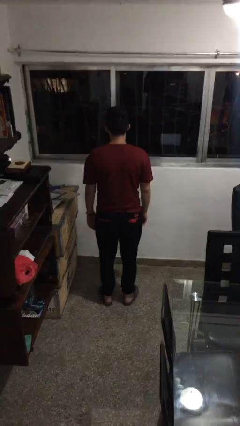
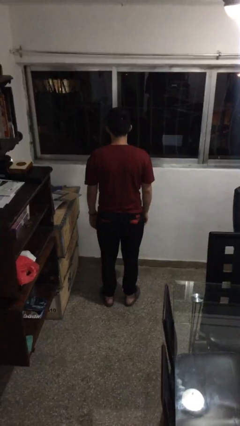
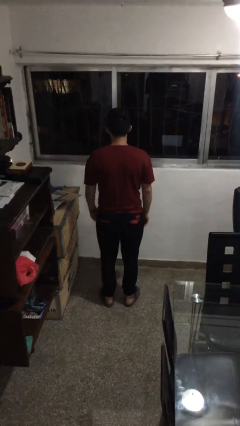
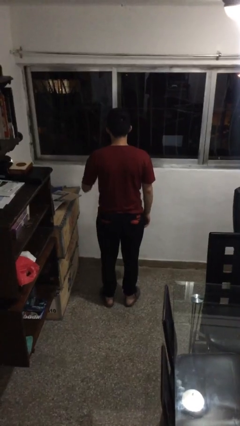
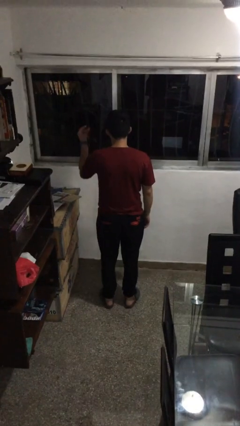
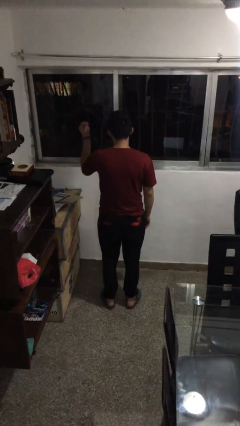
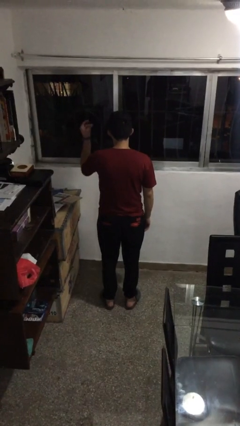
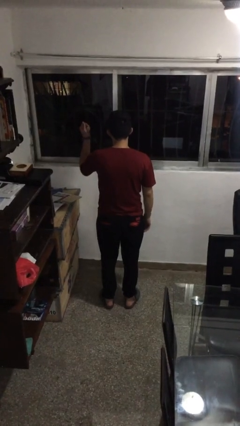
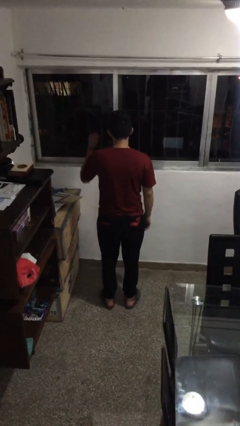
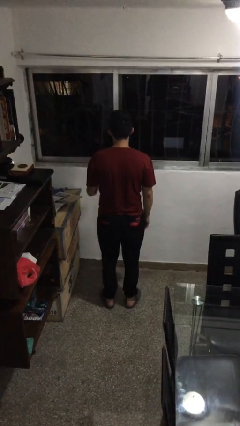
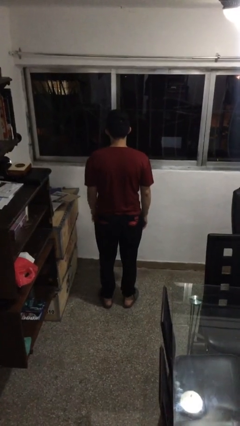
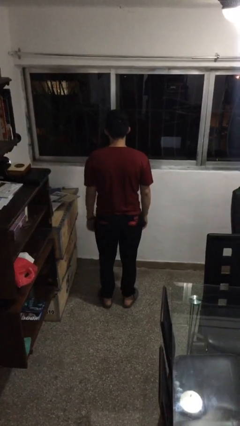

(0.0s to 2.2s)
person snaps fingers

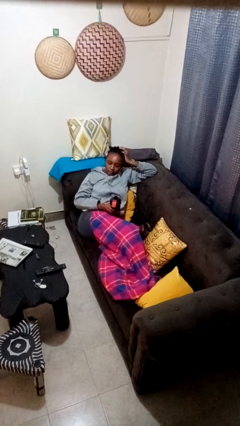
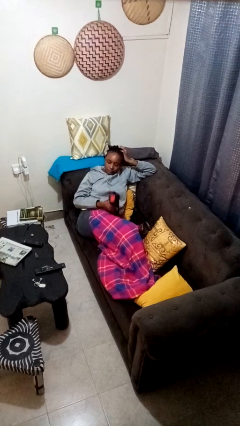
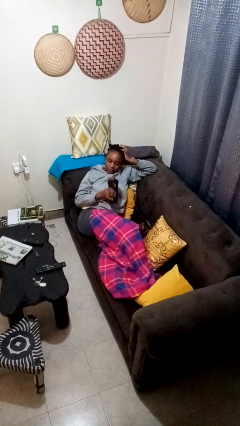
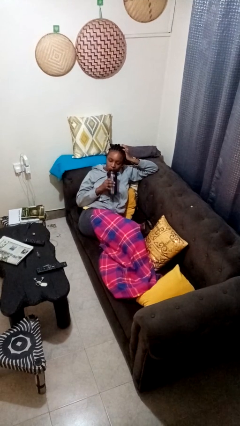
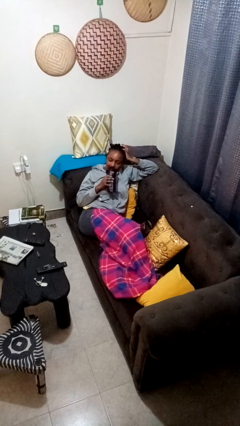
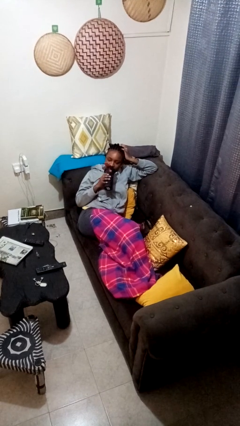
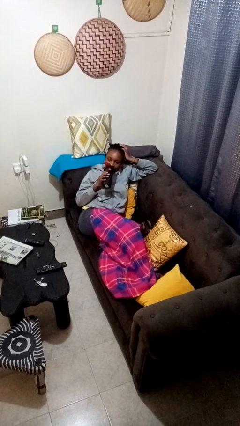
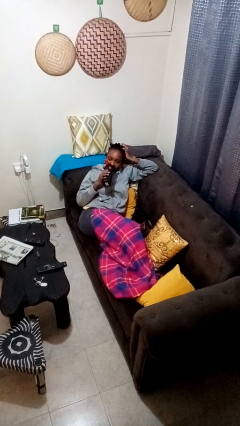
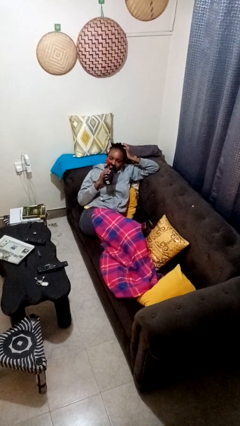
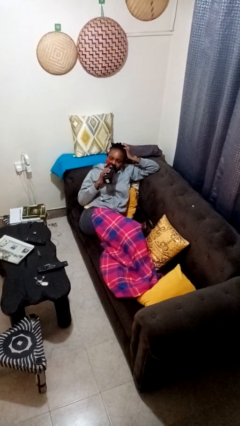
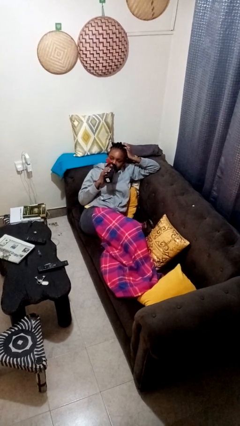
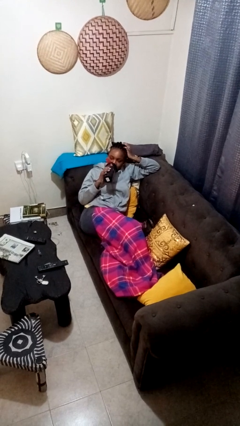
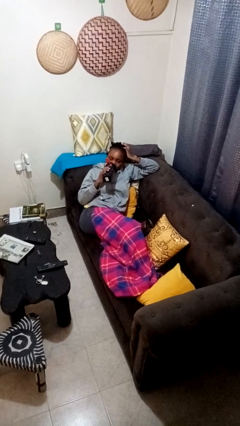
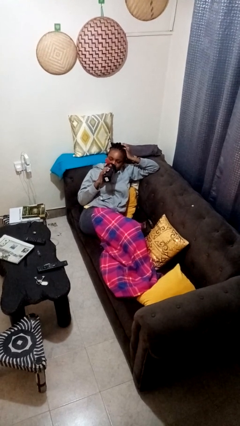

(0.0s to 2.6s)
person drinks from bottle

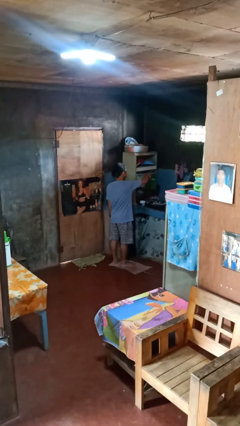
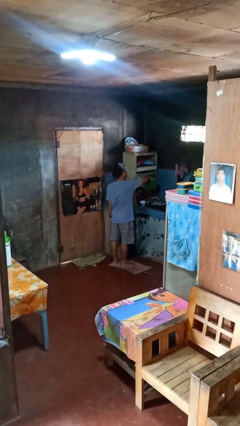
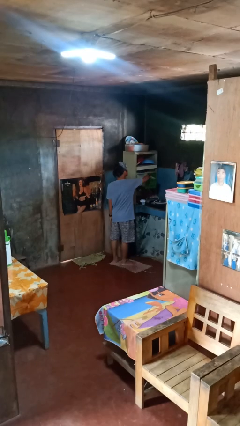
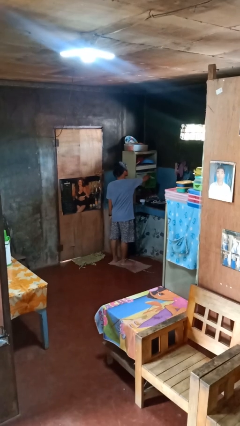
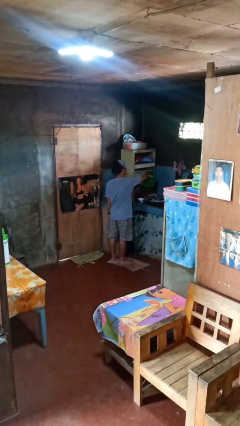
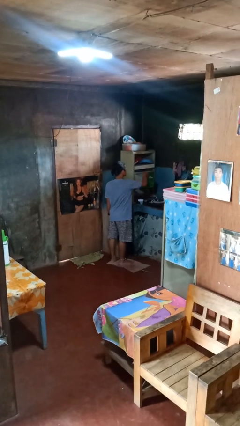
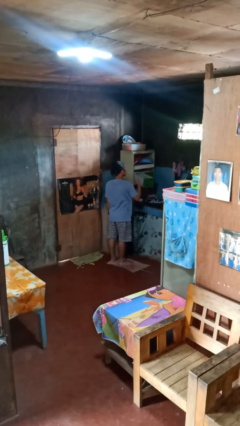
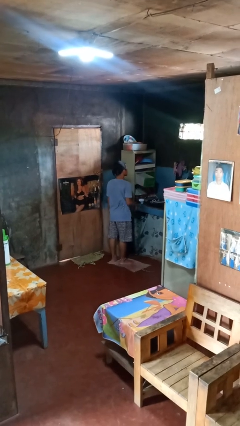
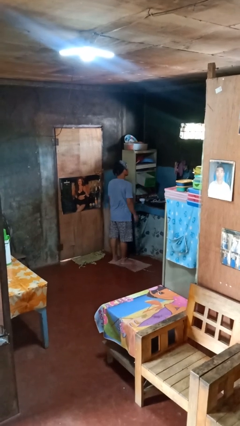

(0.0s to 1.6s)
person puts object into kitchen drawer

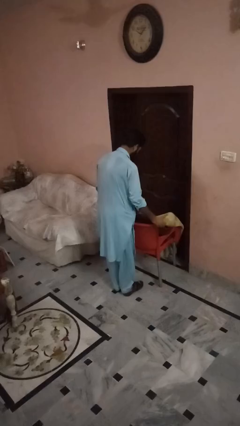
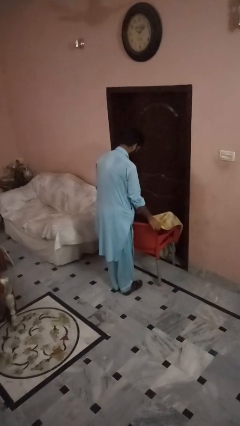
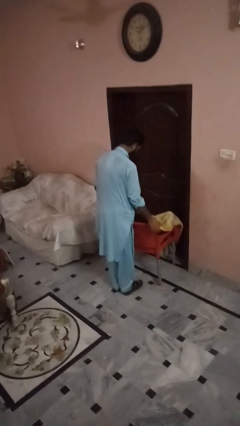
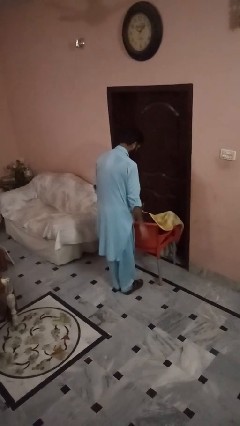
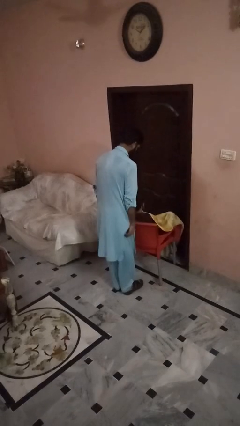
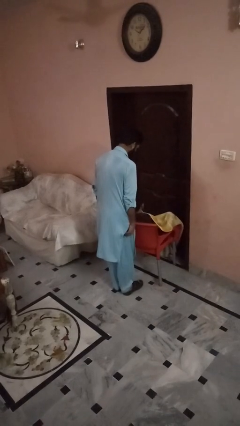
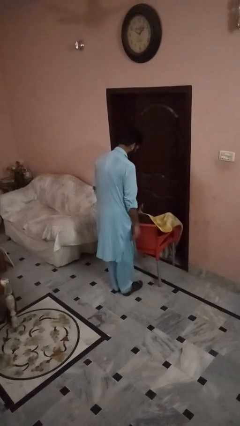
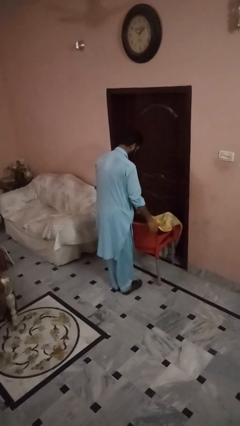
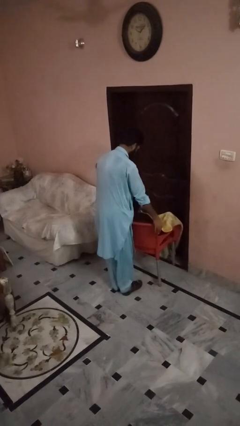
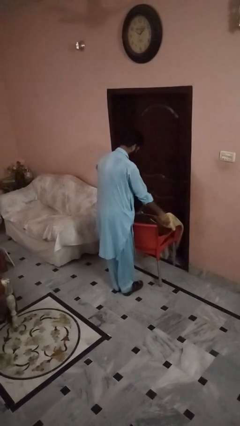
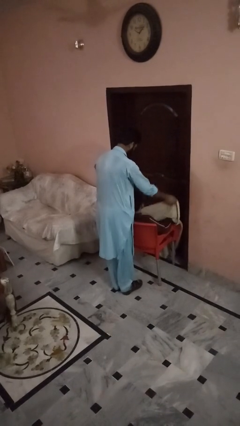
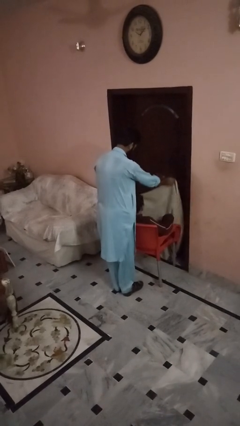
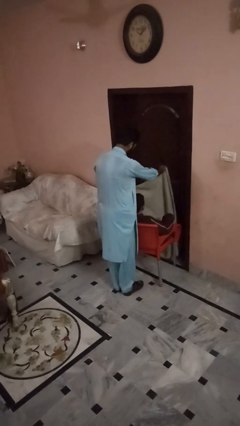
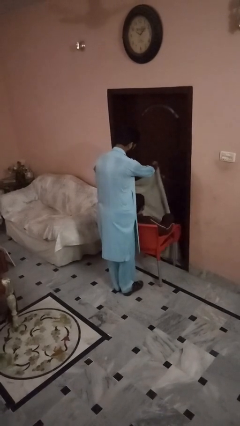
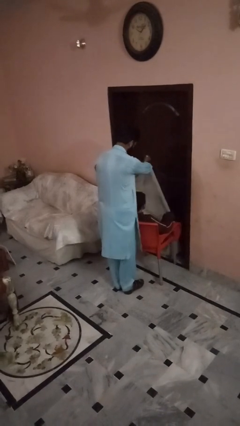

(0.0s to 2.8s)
person uncovers friend with blanket

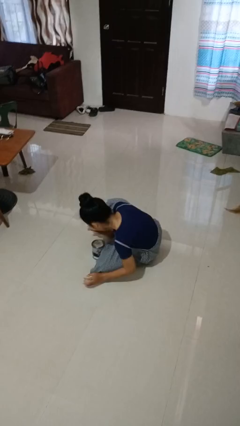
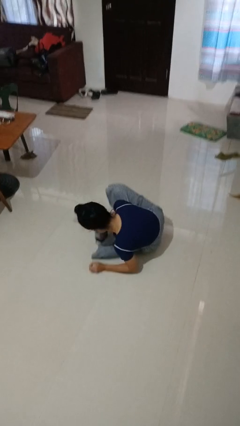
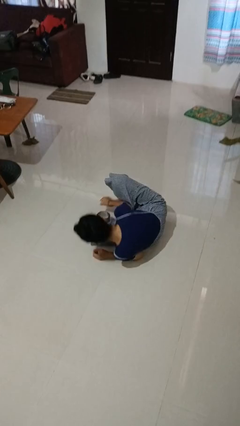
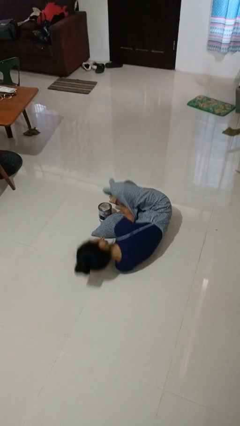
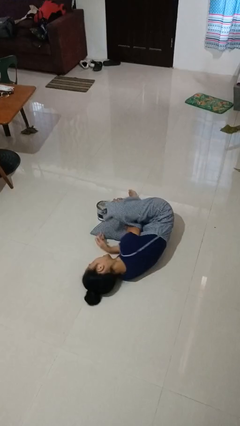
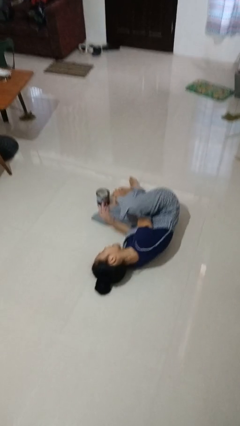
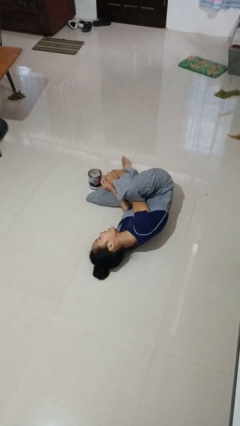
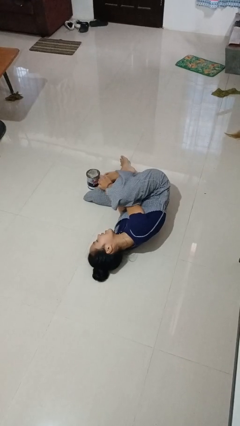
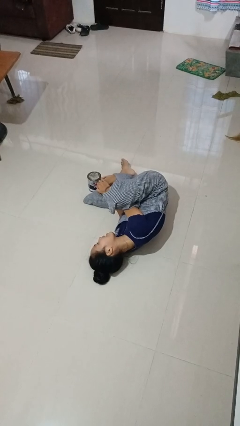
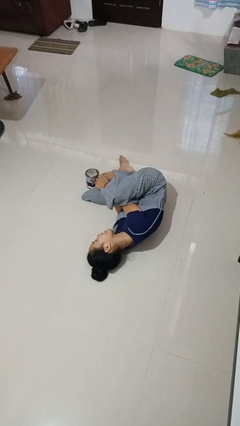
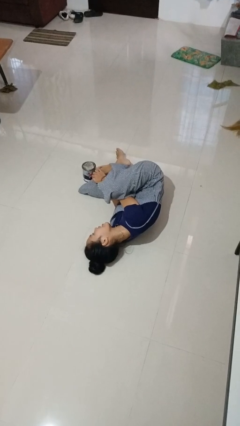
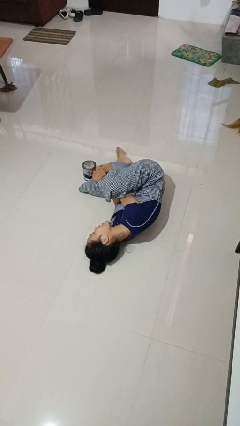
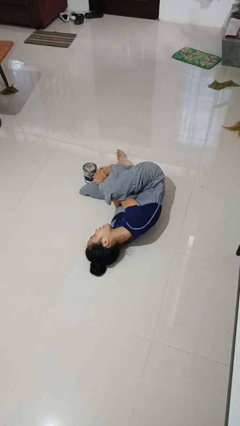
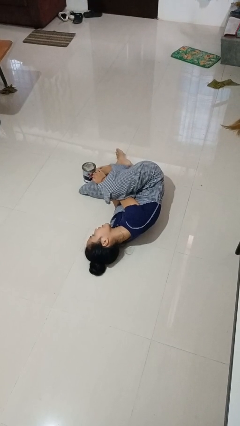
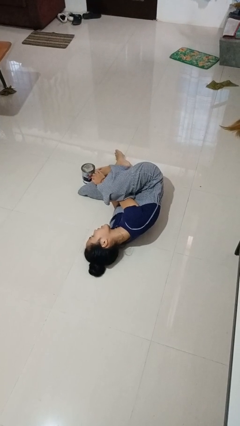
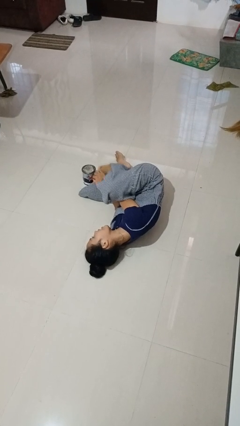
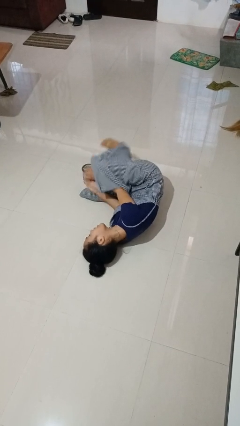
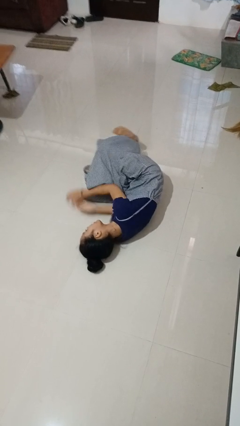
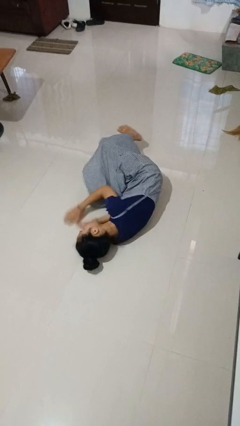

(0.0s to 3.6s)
person lies down on floor

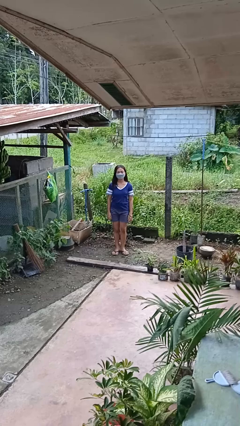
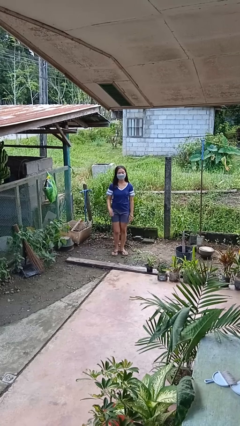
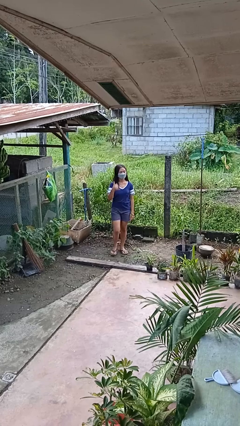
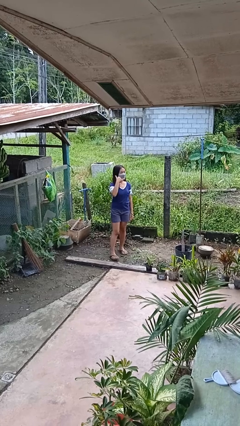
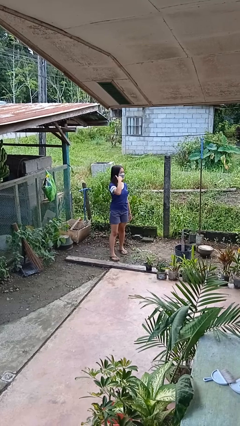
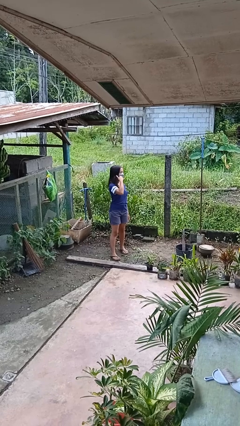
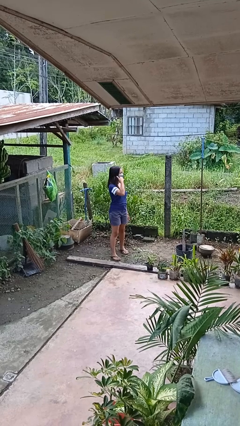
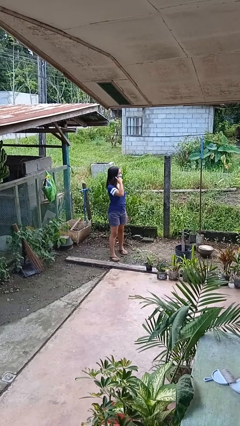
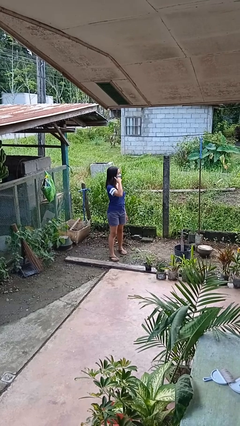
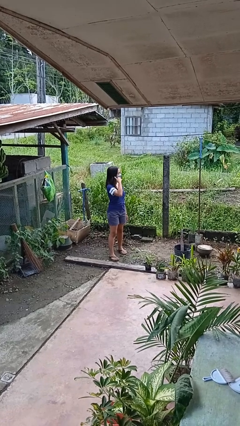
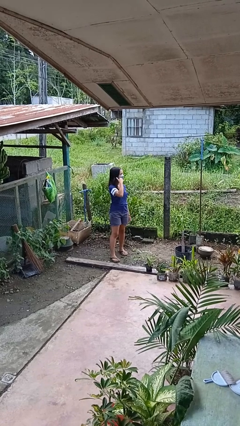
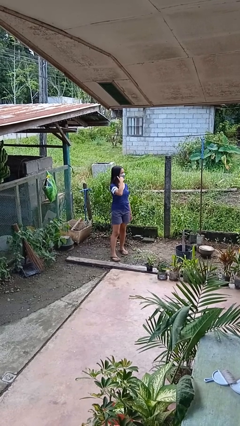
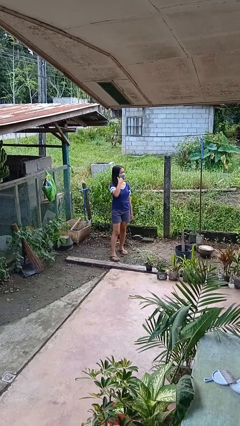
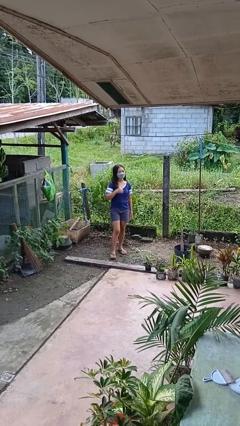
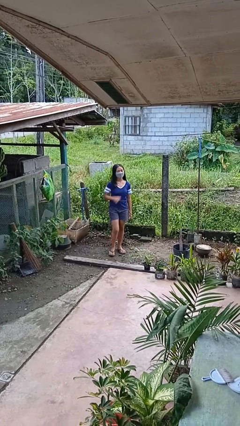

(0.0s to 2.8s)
person gestures call me

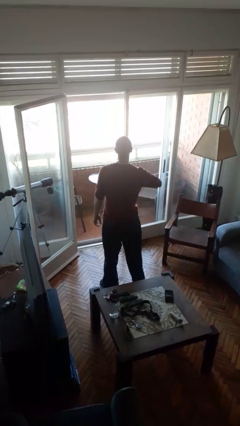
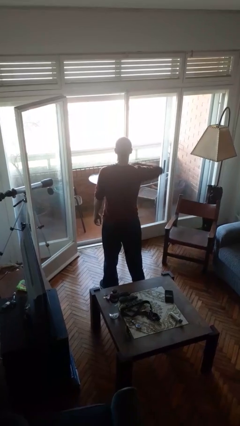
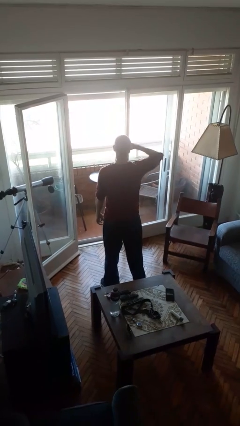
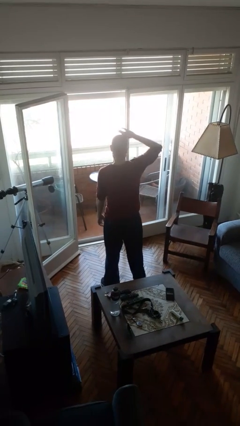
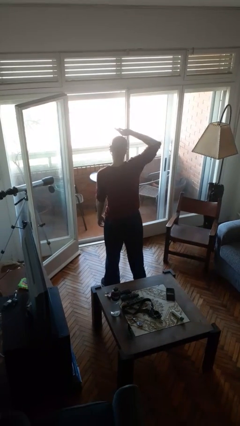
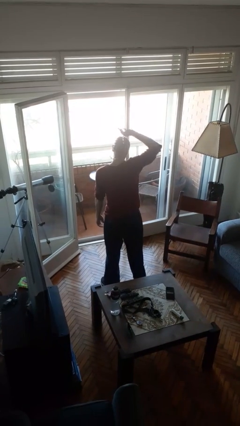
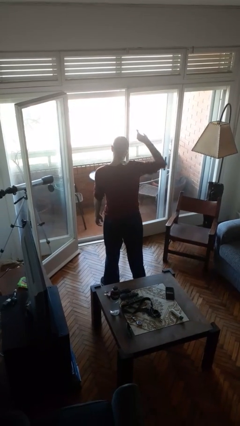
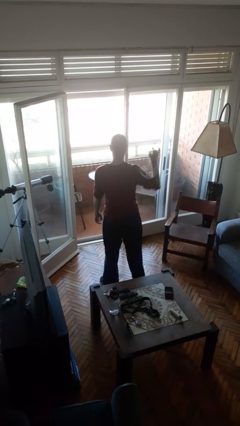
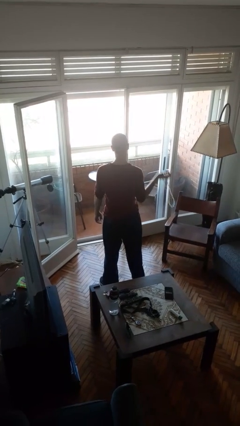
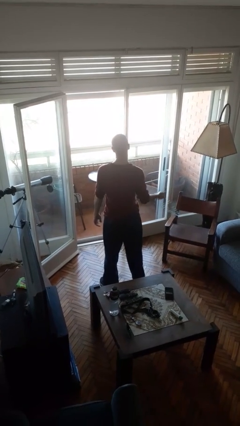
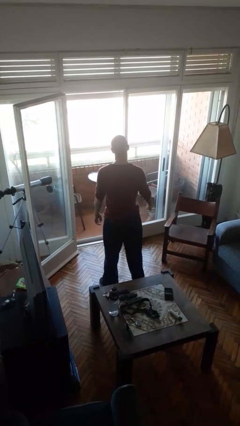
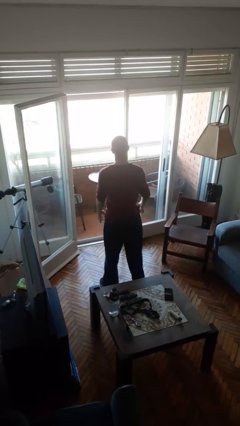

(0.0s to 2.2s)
person takes off necklace
